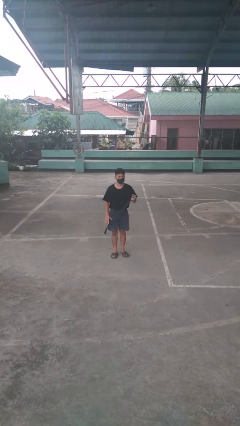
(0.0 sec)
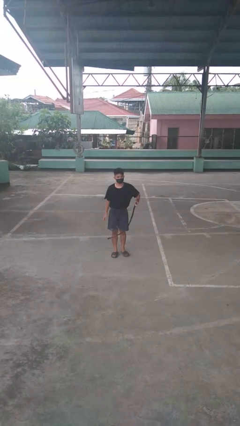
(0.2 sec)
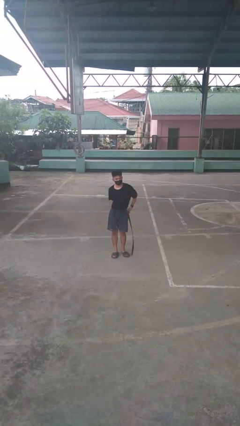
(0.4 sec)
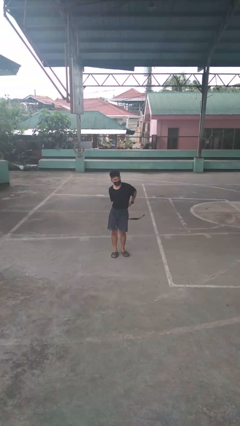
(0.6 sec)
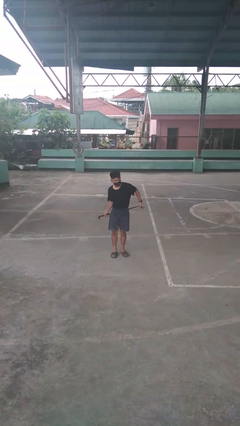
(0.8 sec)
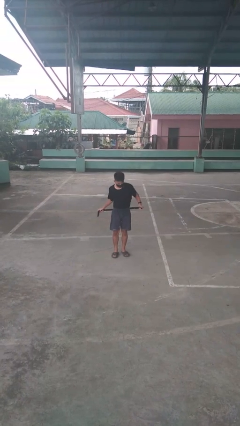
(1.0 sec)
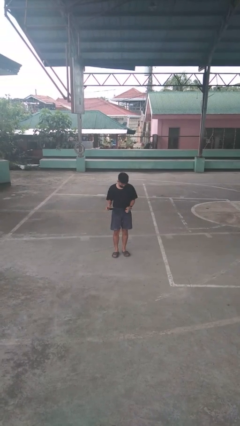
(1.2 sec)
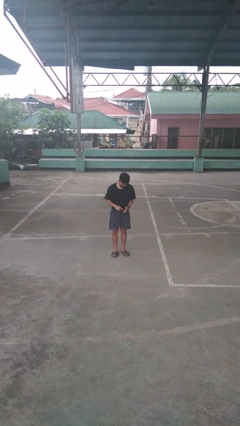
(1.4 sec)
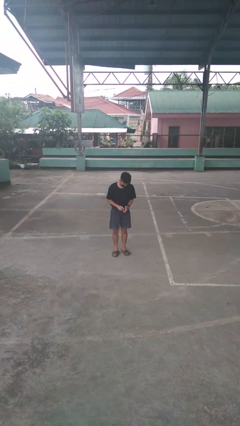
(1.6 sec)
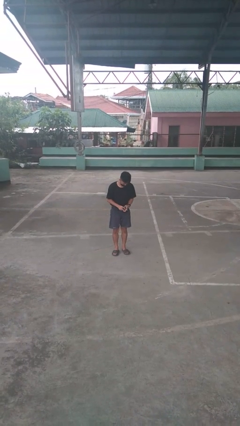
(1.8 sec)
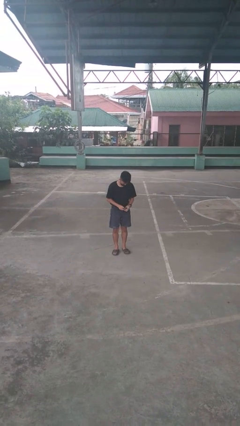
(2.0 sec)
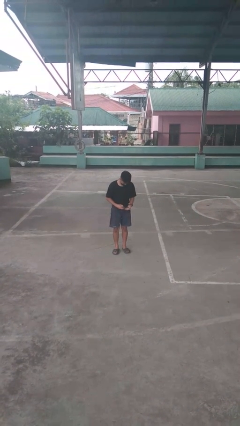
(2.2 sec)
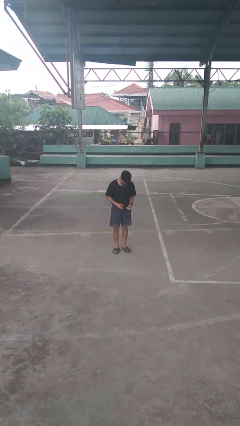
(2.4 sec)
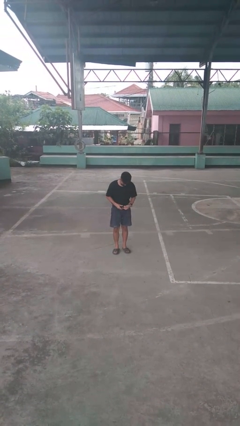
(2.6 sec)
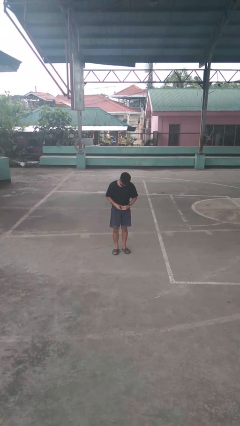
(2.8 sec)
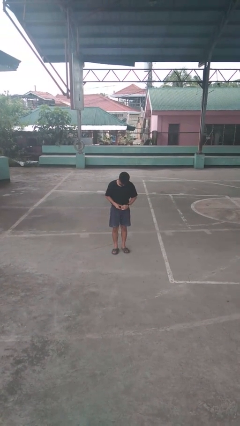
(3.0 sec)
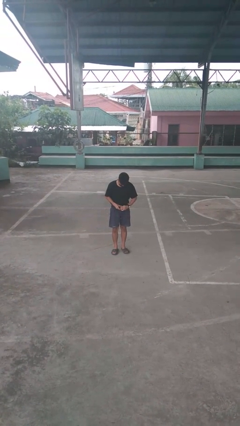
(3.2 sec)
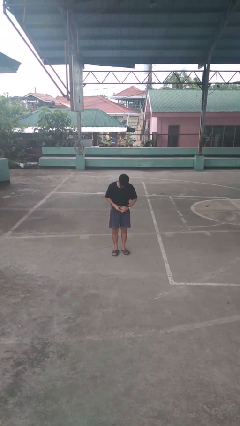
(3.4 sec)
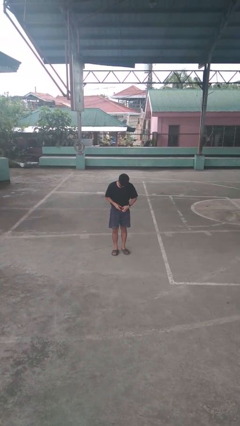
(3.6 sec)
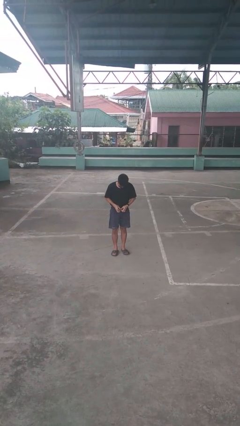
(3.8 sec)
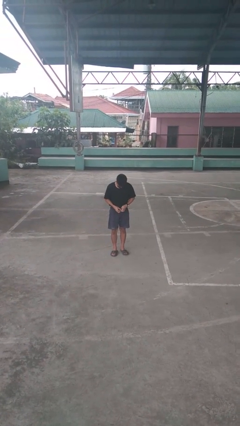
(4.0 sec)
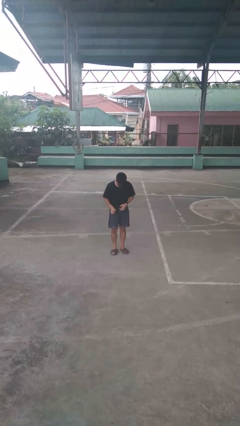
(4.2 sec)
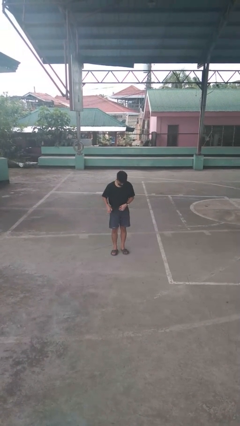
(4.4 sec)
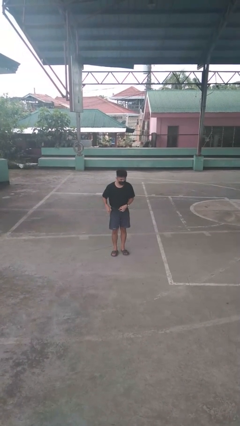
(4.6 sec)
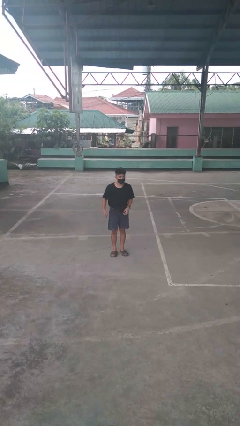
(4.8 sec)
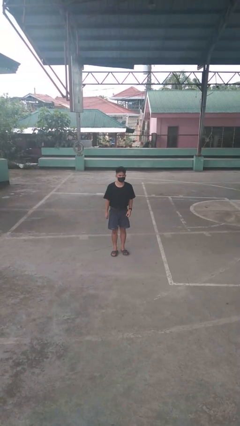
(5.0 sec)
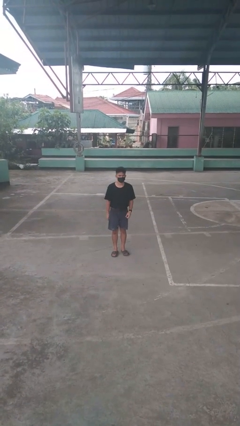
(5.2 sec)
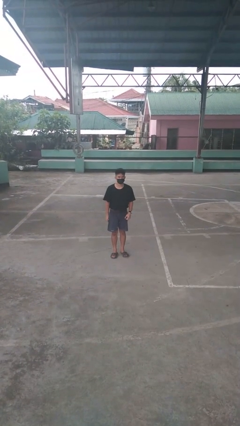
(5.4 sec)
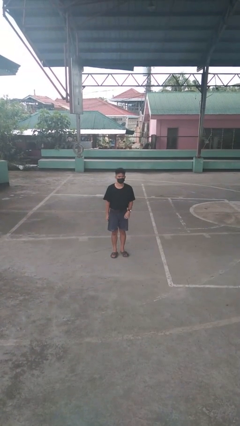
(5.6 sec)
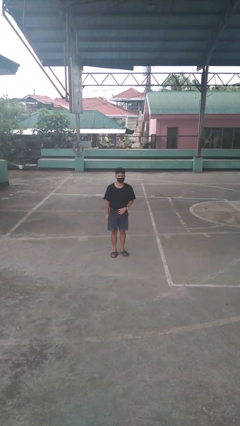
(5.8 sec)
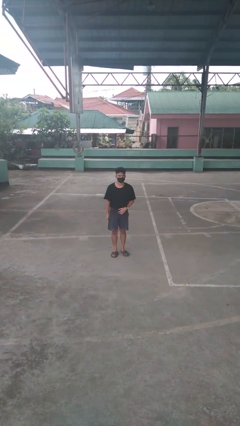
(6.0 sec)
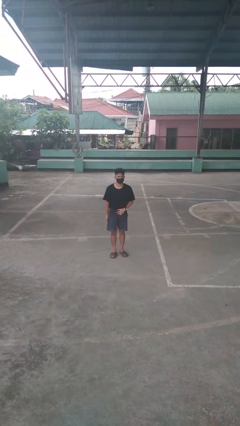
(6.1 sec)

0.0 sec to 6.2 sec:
person puts on belt

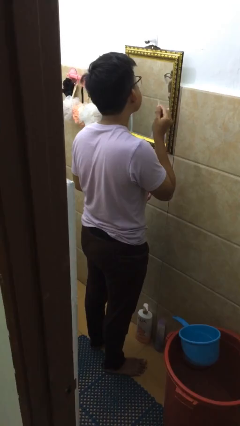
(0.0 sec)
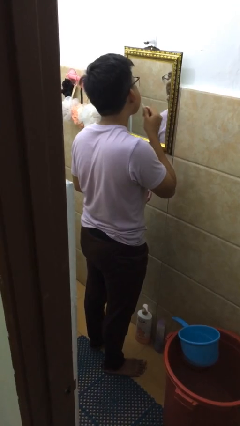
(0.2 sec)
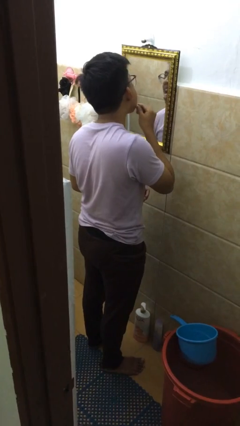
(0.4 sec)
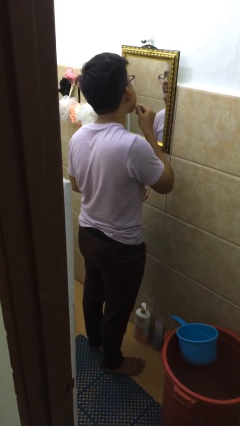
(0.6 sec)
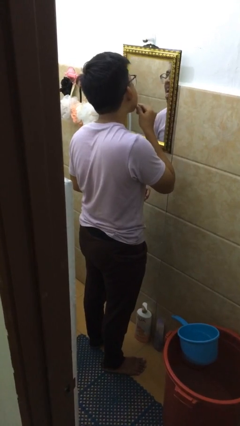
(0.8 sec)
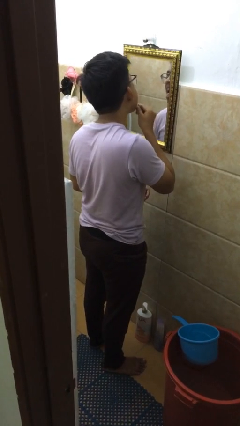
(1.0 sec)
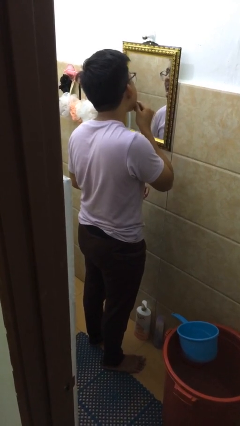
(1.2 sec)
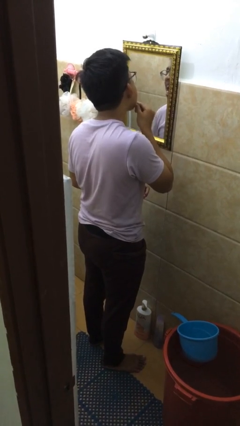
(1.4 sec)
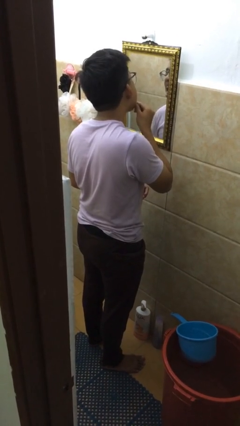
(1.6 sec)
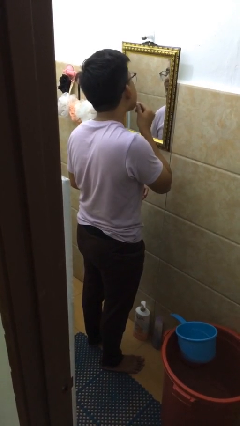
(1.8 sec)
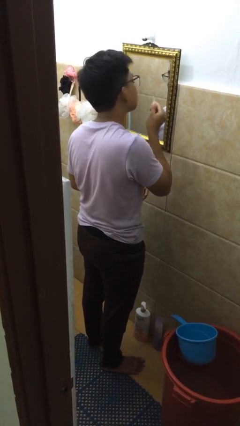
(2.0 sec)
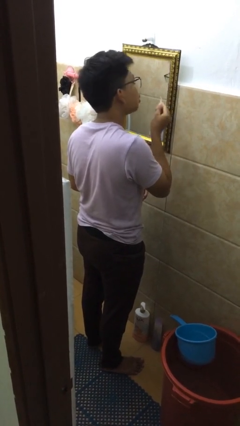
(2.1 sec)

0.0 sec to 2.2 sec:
person flosses

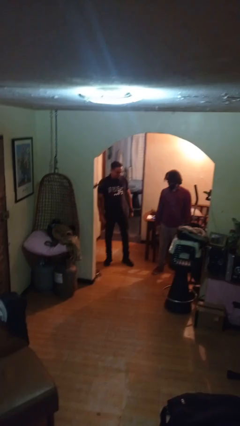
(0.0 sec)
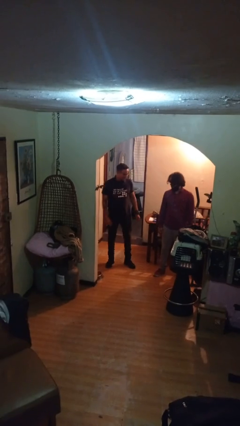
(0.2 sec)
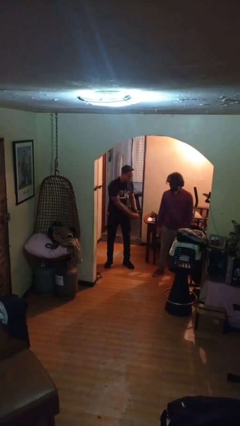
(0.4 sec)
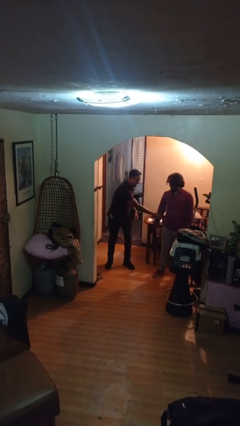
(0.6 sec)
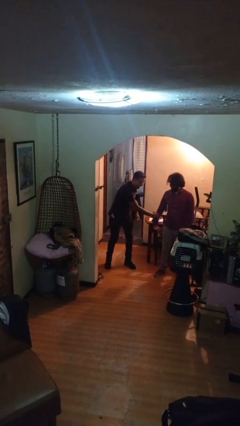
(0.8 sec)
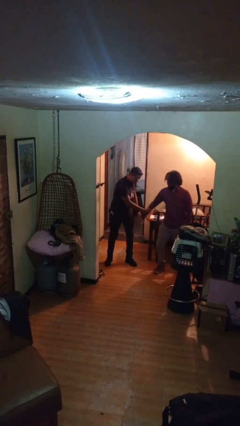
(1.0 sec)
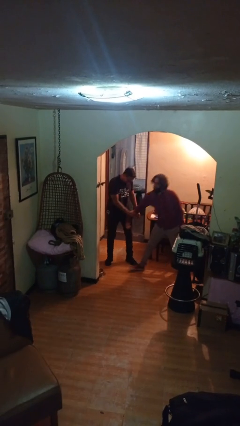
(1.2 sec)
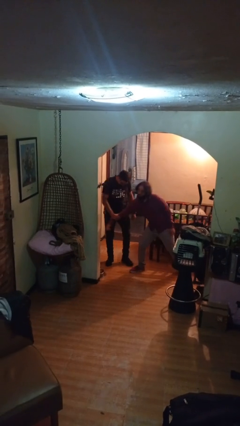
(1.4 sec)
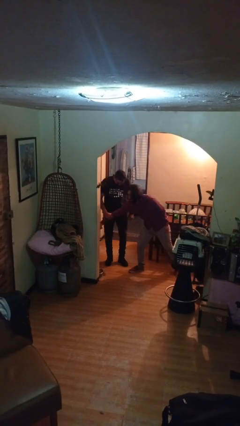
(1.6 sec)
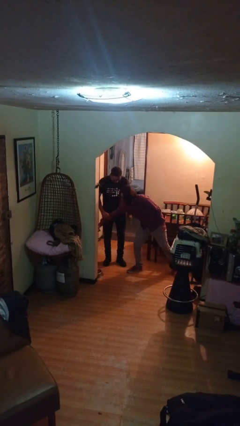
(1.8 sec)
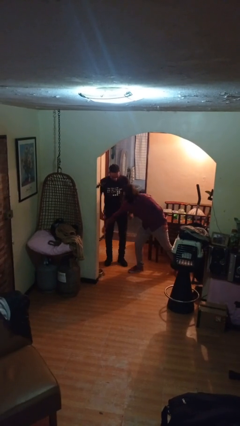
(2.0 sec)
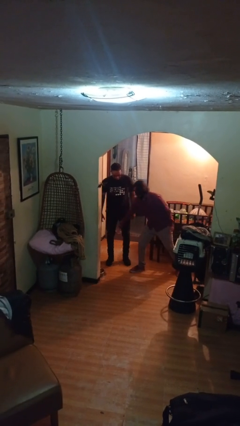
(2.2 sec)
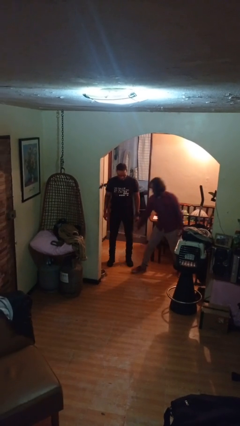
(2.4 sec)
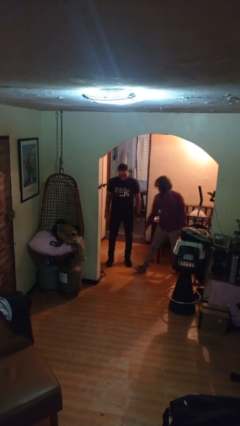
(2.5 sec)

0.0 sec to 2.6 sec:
person grabs person by forearm

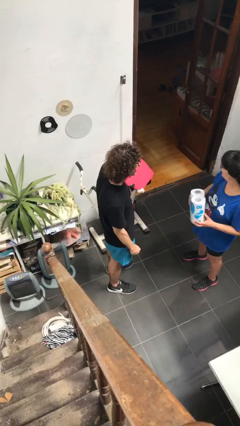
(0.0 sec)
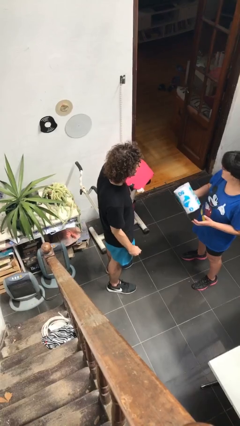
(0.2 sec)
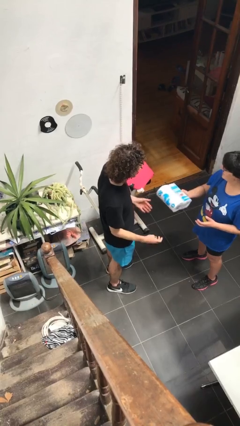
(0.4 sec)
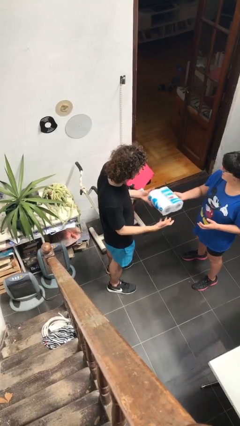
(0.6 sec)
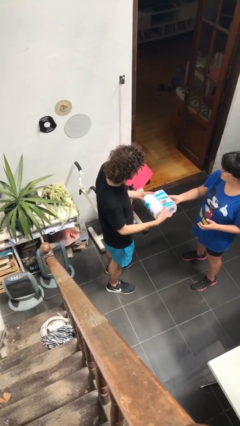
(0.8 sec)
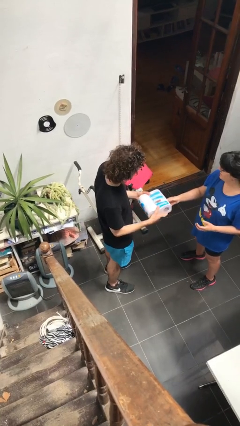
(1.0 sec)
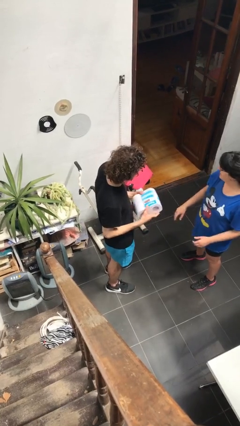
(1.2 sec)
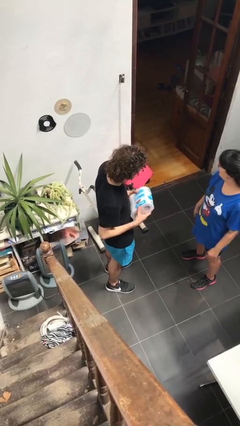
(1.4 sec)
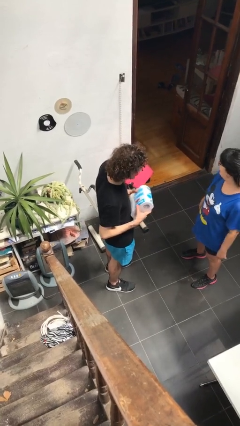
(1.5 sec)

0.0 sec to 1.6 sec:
person transfers object to person

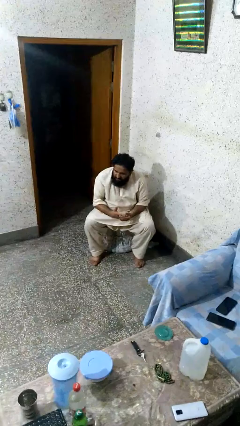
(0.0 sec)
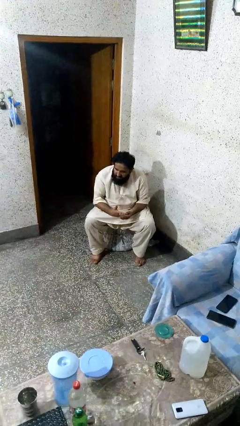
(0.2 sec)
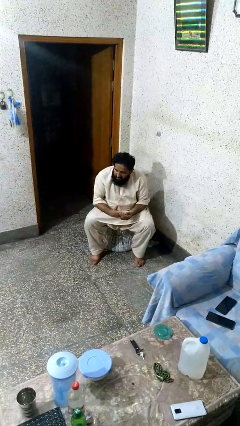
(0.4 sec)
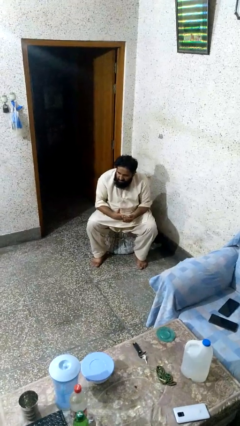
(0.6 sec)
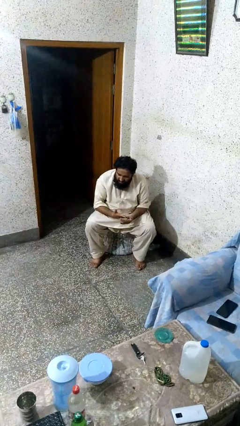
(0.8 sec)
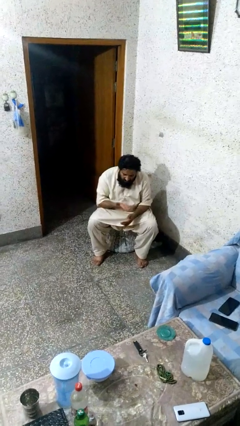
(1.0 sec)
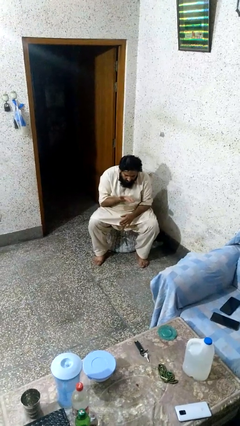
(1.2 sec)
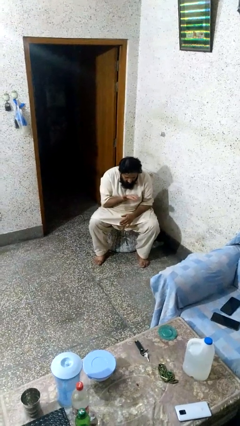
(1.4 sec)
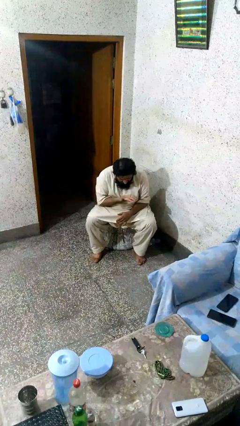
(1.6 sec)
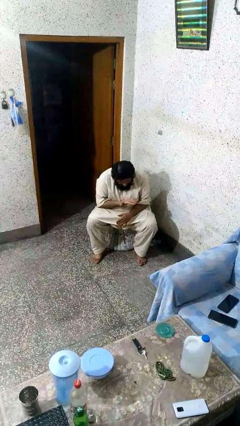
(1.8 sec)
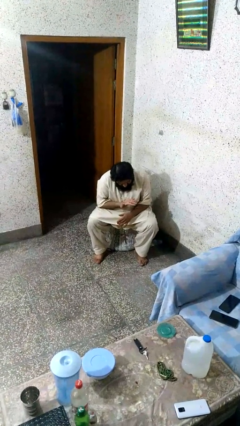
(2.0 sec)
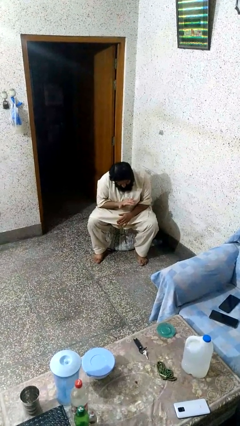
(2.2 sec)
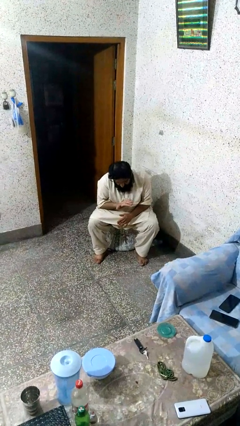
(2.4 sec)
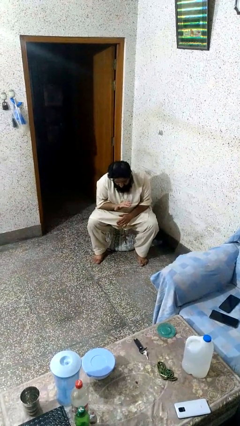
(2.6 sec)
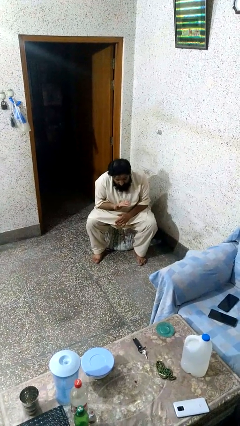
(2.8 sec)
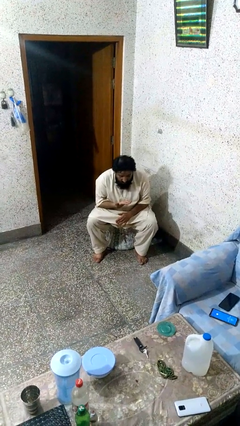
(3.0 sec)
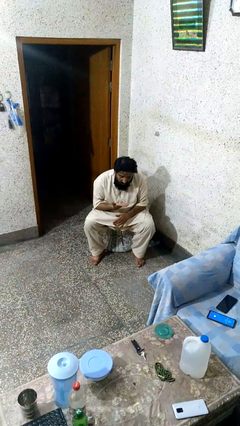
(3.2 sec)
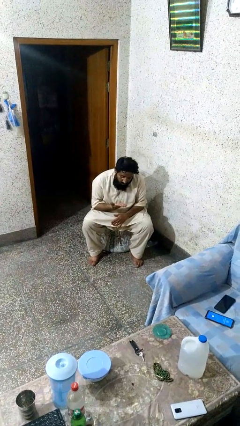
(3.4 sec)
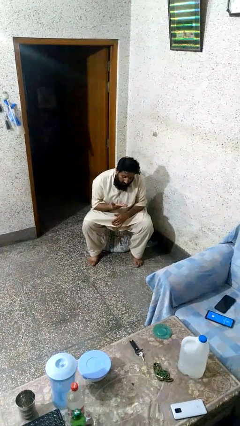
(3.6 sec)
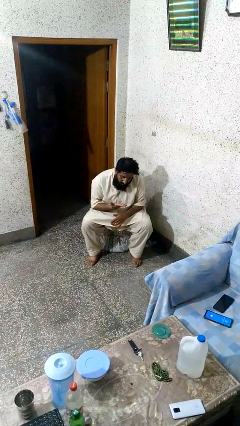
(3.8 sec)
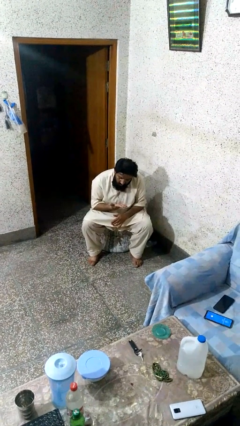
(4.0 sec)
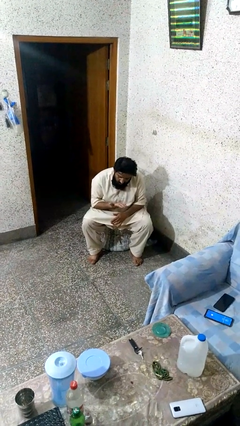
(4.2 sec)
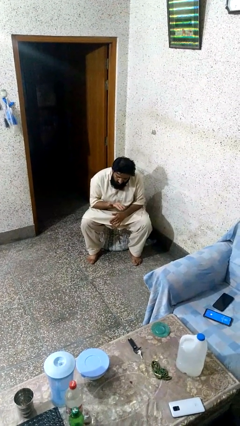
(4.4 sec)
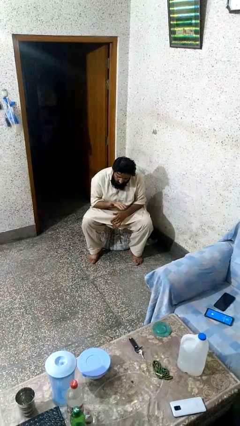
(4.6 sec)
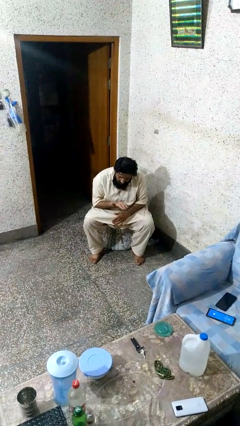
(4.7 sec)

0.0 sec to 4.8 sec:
person looks at hands in lap
